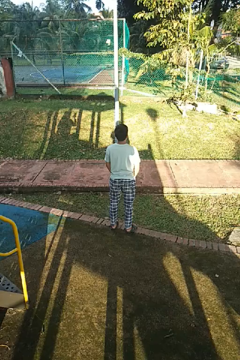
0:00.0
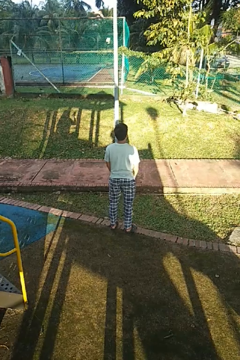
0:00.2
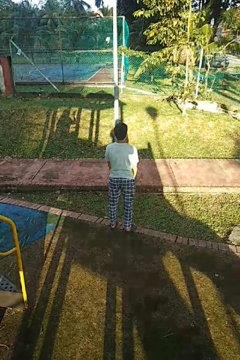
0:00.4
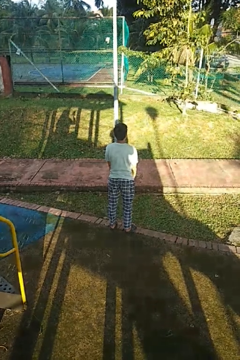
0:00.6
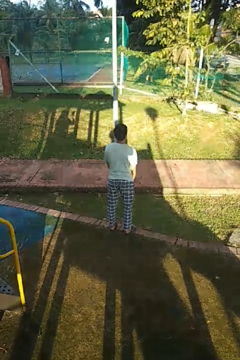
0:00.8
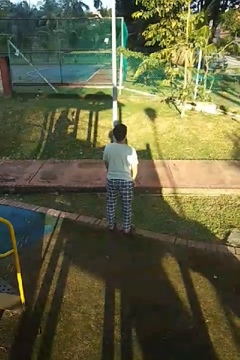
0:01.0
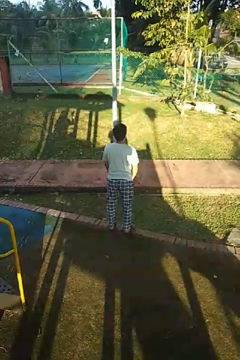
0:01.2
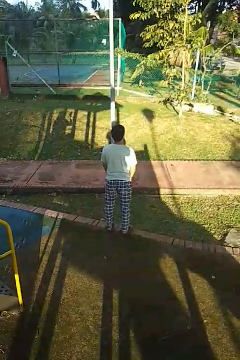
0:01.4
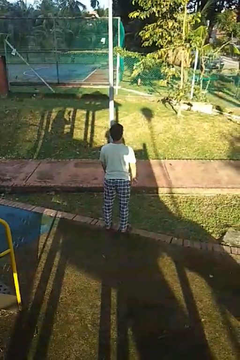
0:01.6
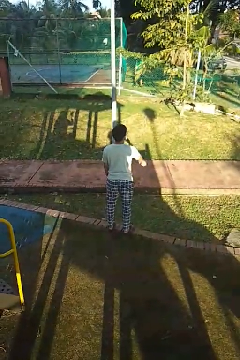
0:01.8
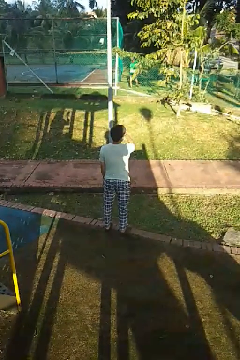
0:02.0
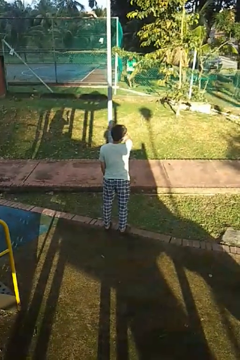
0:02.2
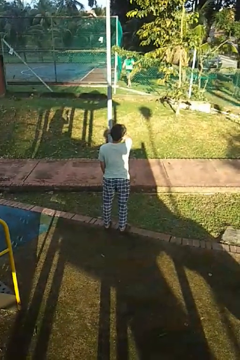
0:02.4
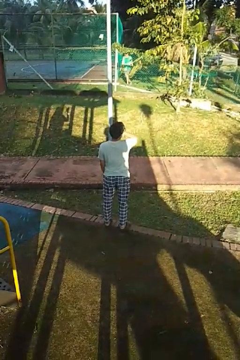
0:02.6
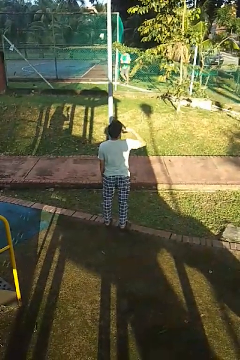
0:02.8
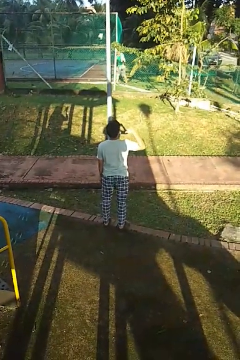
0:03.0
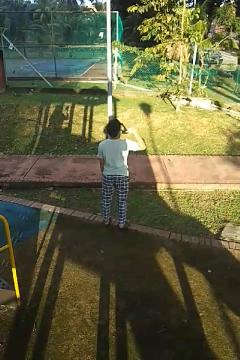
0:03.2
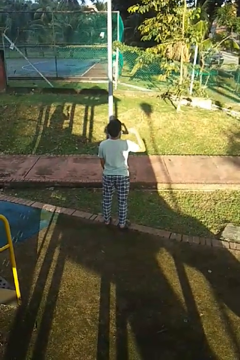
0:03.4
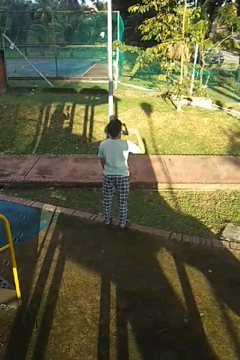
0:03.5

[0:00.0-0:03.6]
person gestures cut

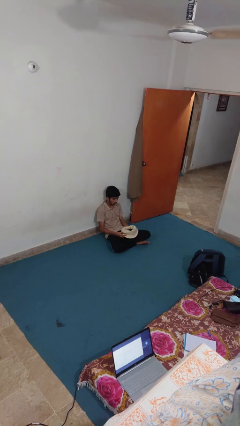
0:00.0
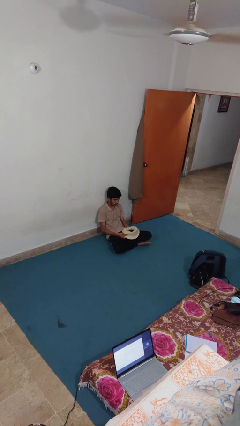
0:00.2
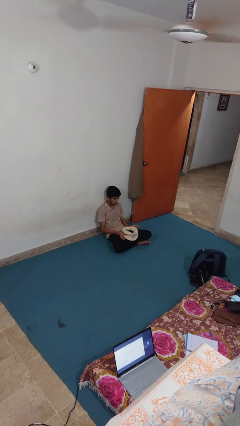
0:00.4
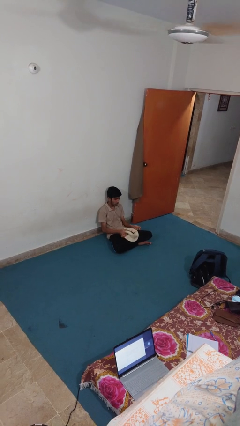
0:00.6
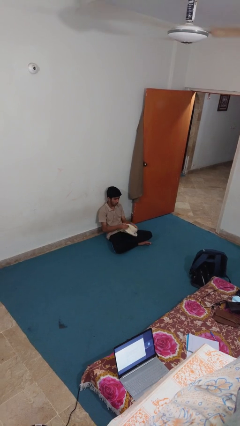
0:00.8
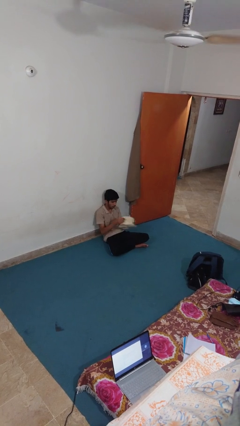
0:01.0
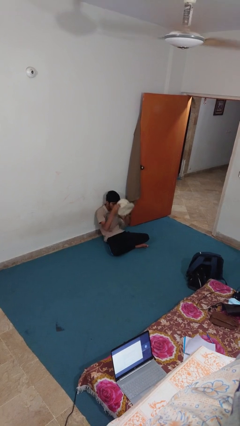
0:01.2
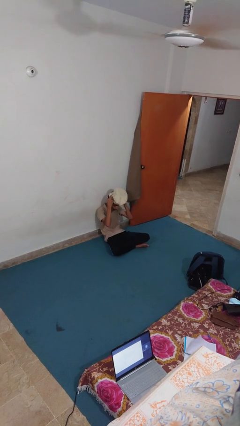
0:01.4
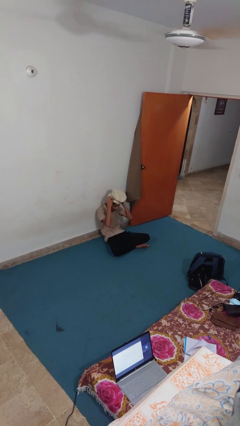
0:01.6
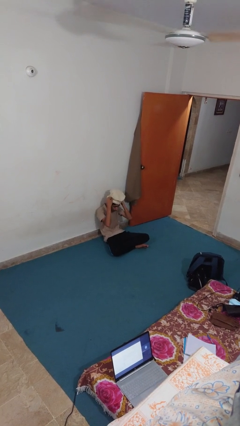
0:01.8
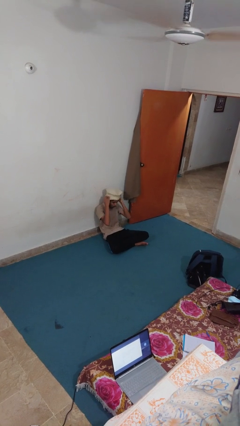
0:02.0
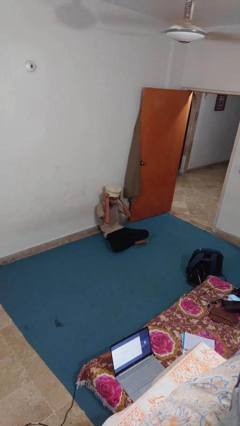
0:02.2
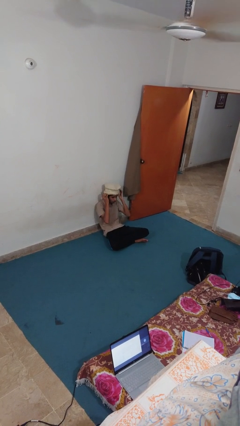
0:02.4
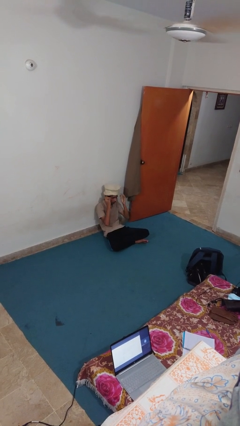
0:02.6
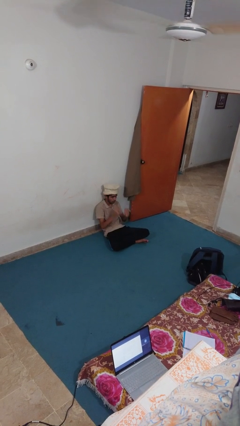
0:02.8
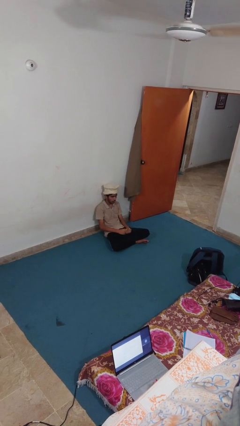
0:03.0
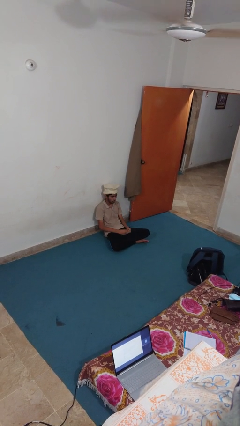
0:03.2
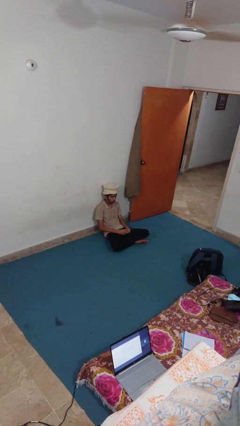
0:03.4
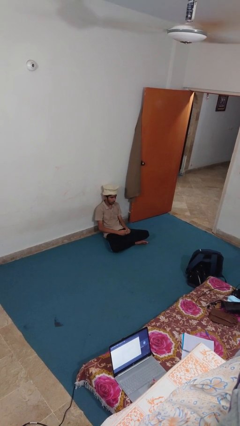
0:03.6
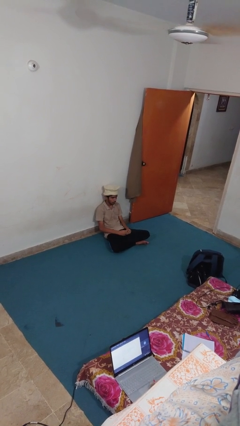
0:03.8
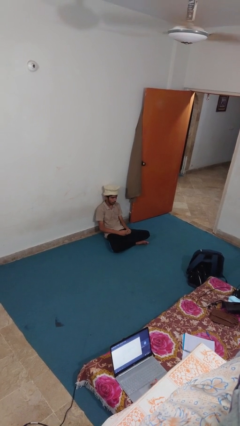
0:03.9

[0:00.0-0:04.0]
person puts on hat

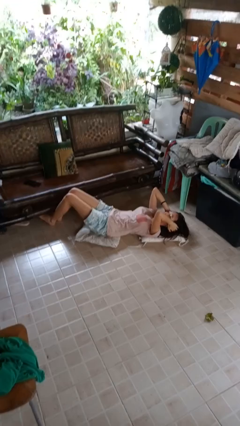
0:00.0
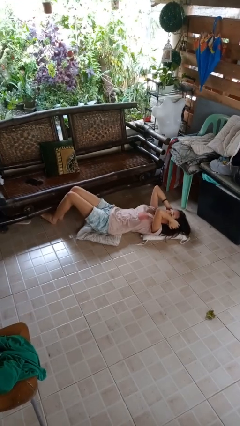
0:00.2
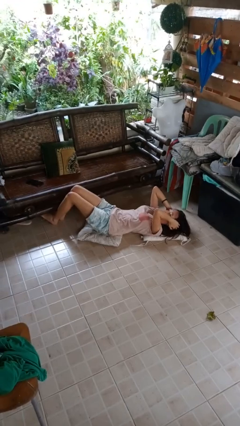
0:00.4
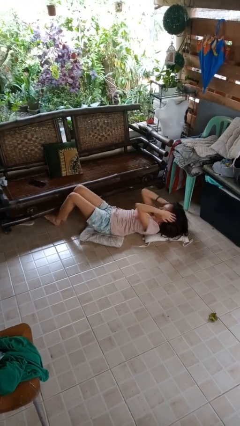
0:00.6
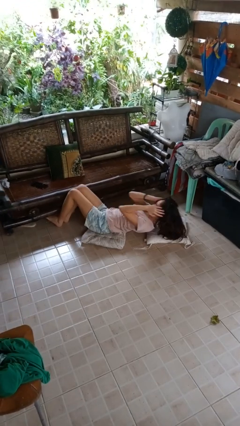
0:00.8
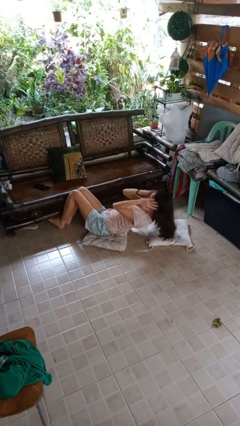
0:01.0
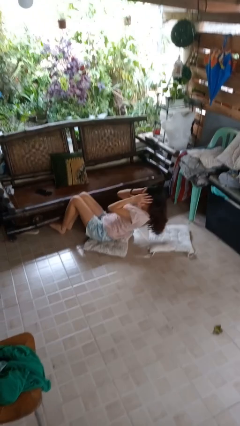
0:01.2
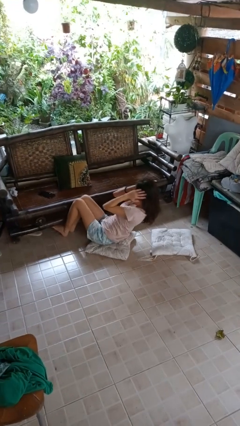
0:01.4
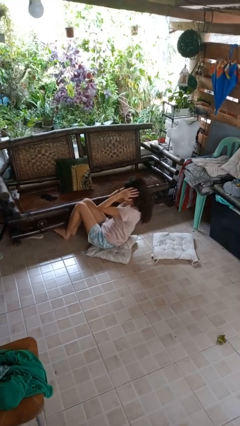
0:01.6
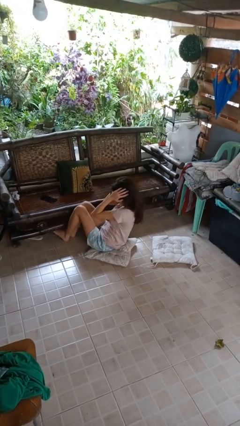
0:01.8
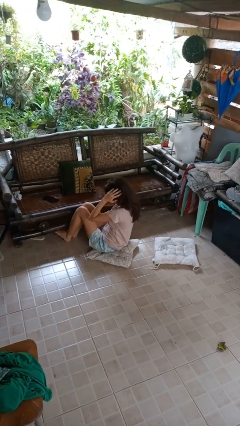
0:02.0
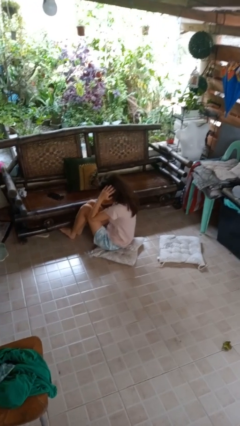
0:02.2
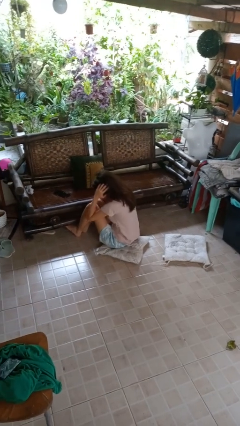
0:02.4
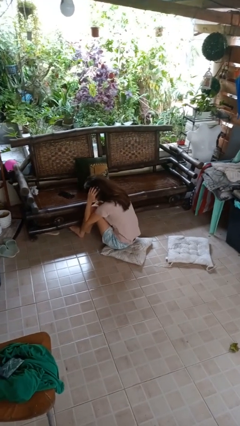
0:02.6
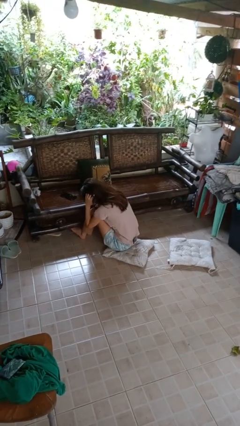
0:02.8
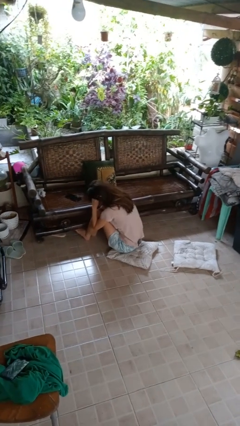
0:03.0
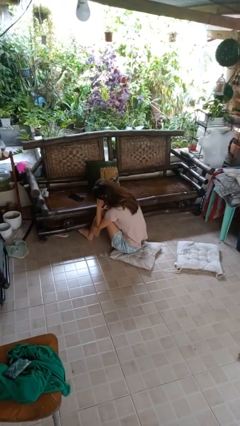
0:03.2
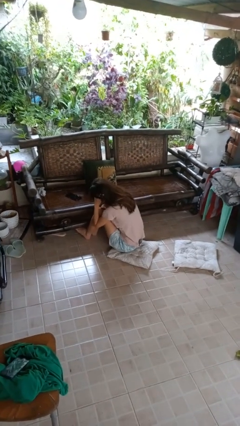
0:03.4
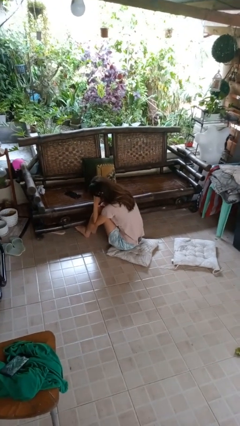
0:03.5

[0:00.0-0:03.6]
person exercises with situp

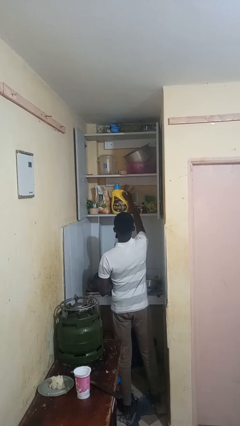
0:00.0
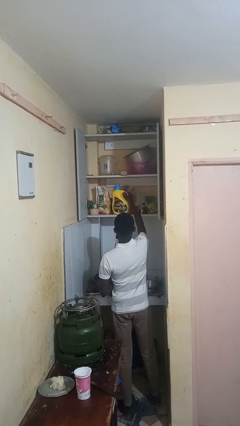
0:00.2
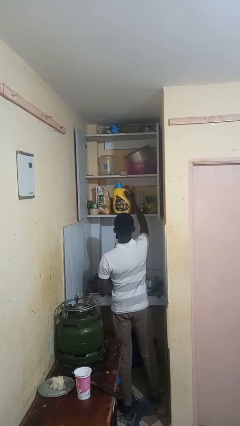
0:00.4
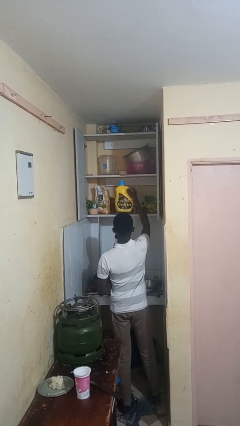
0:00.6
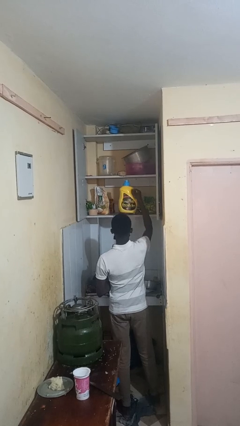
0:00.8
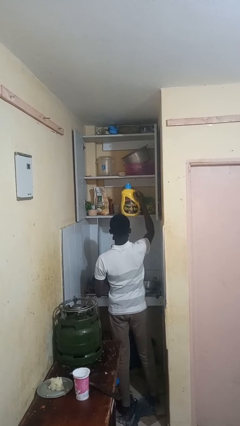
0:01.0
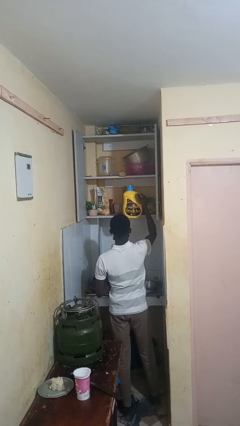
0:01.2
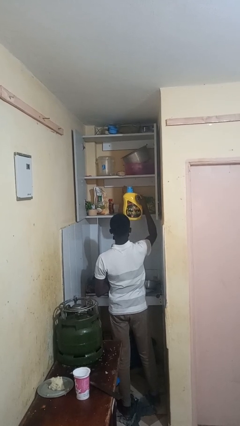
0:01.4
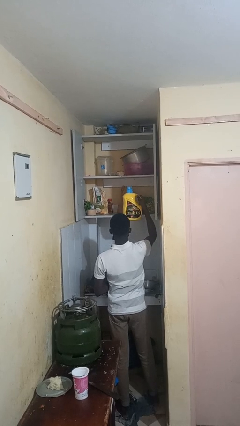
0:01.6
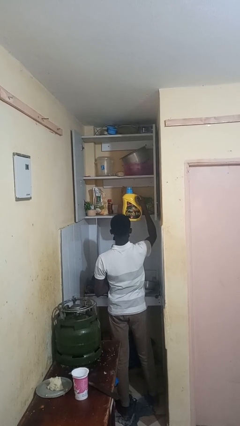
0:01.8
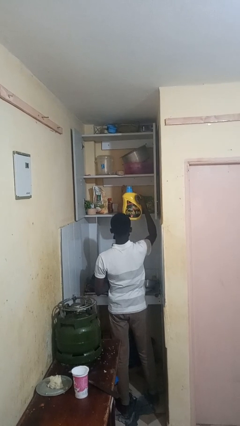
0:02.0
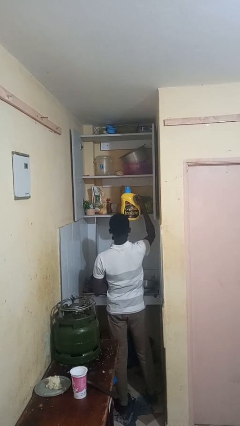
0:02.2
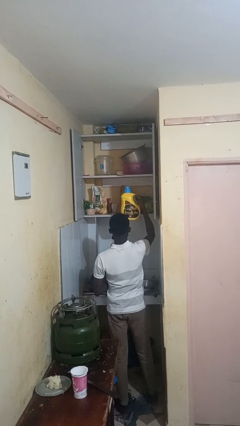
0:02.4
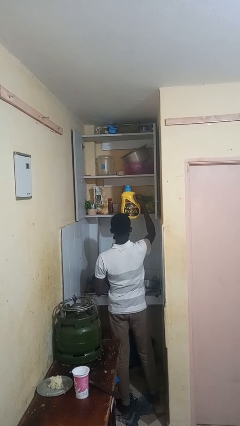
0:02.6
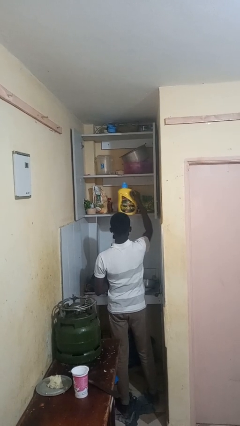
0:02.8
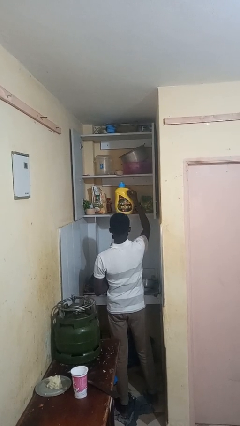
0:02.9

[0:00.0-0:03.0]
person picks up object from countertop

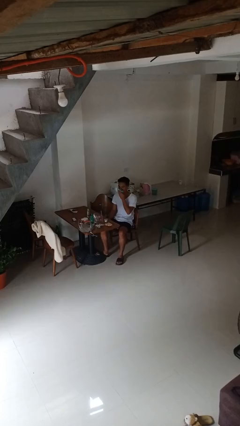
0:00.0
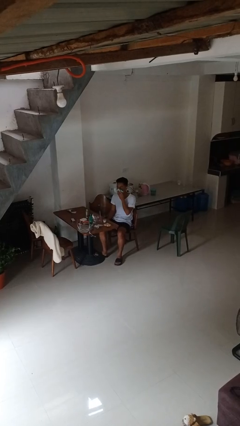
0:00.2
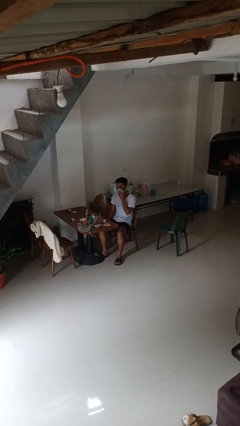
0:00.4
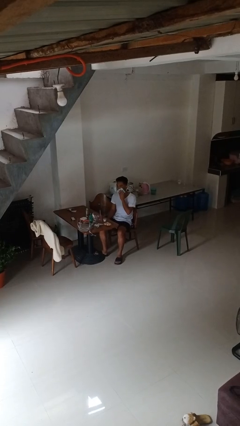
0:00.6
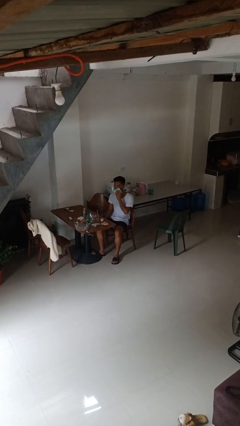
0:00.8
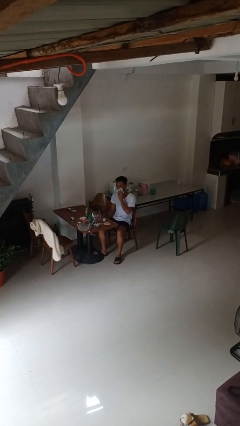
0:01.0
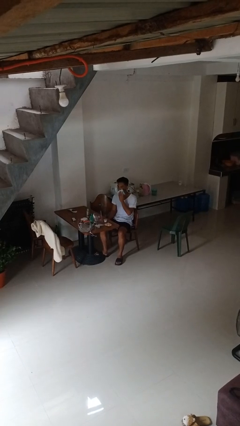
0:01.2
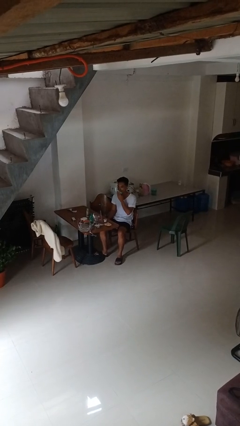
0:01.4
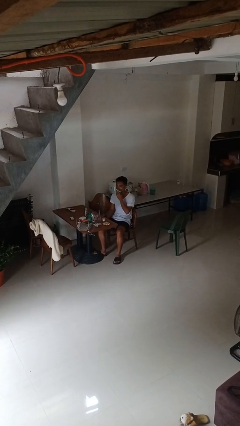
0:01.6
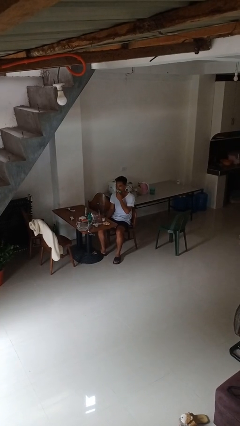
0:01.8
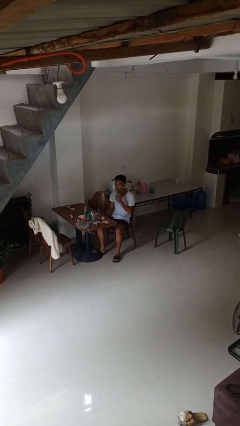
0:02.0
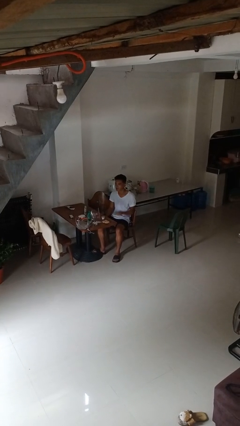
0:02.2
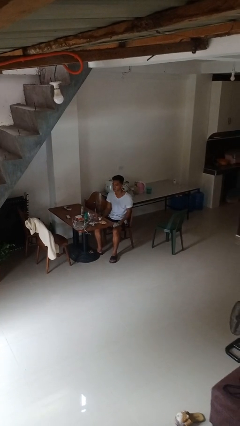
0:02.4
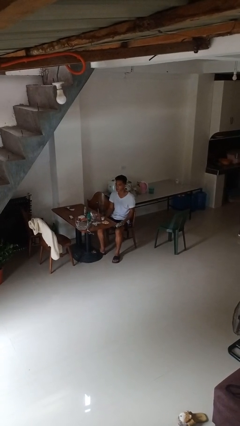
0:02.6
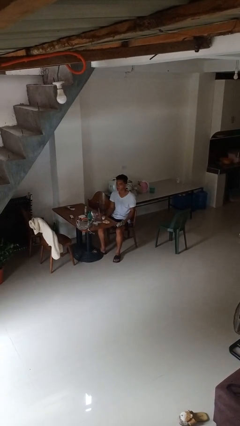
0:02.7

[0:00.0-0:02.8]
person wipes mouth with napkin

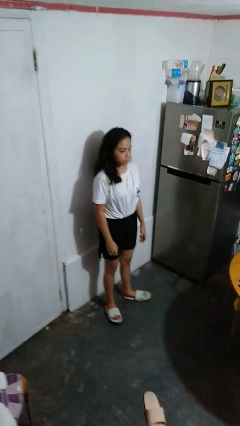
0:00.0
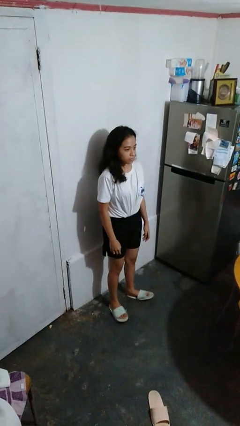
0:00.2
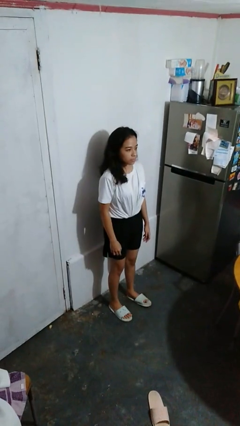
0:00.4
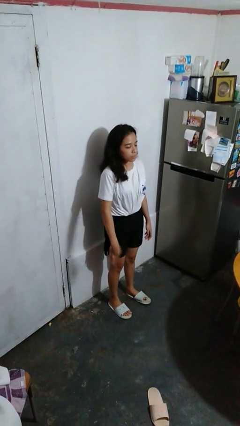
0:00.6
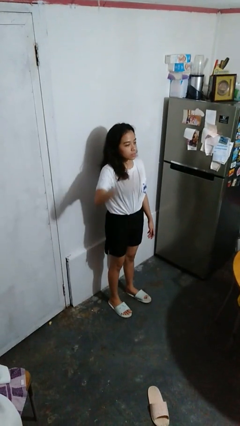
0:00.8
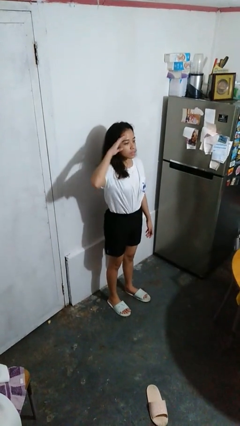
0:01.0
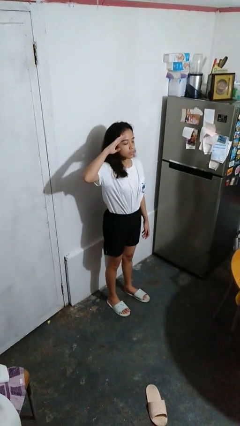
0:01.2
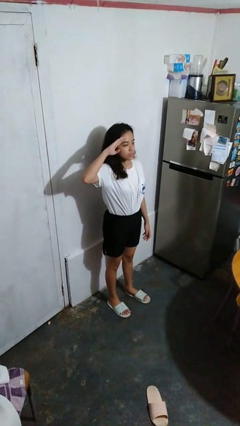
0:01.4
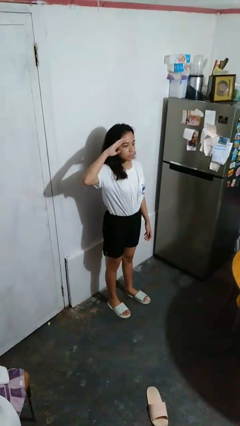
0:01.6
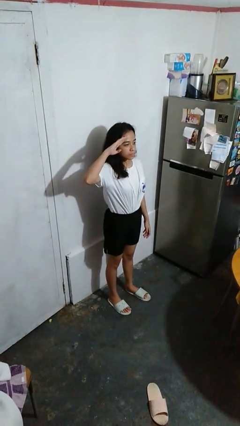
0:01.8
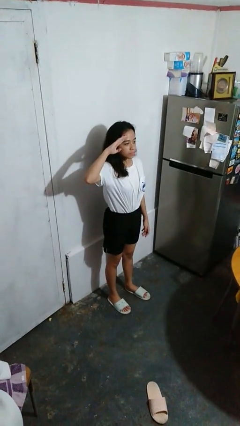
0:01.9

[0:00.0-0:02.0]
person salutes
